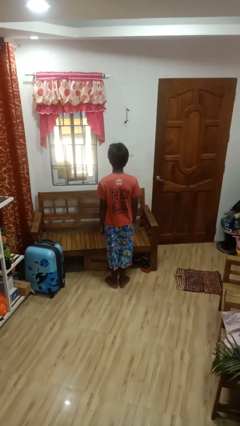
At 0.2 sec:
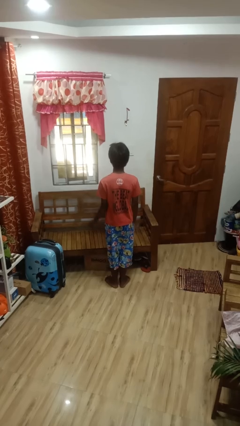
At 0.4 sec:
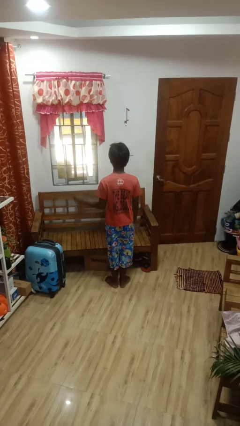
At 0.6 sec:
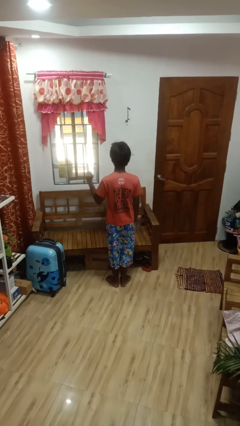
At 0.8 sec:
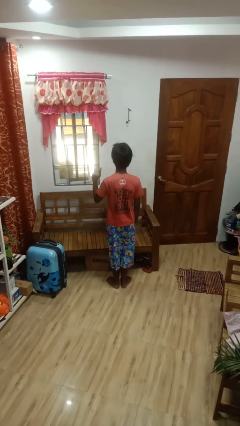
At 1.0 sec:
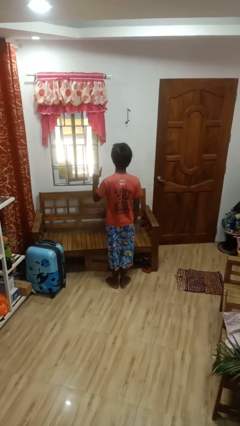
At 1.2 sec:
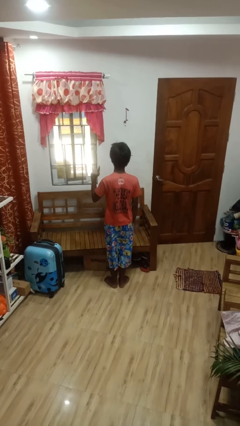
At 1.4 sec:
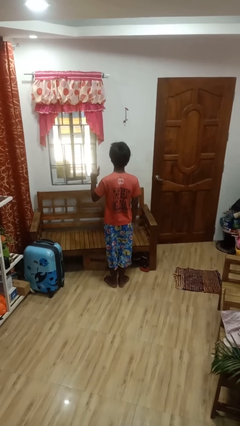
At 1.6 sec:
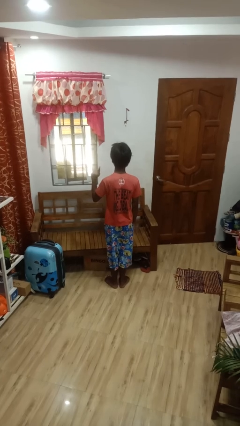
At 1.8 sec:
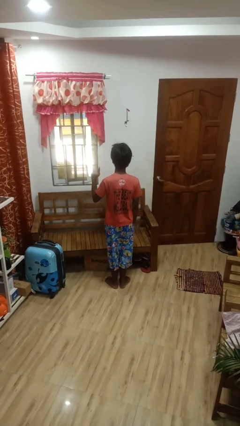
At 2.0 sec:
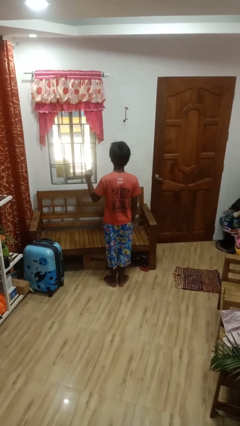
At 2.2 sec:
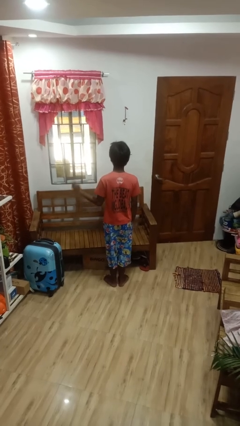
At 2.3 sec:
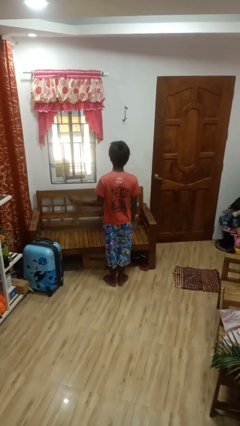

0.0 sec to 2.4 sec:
person gestures number one

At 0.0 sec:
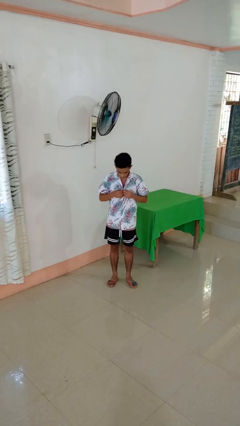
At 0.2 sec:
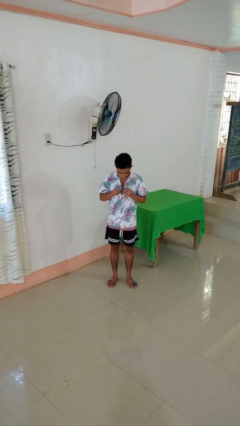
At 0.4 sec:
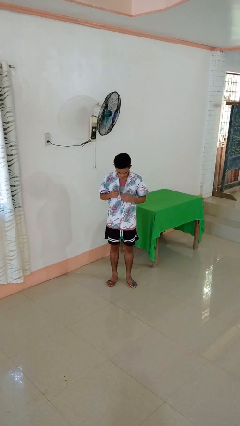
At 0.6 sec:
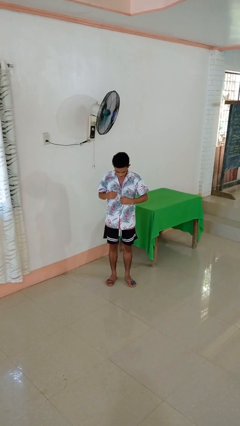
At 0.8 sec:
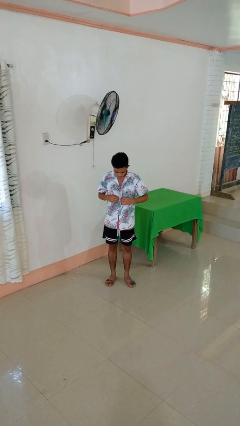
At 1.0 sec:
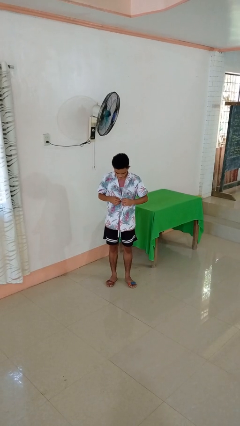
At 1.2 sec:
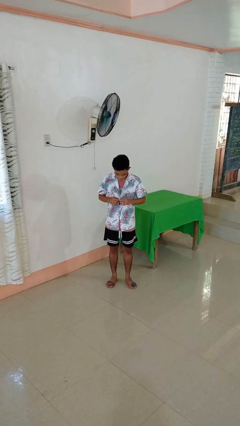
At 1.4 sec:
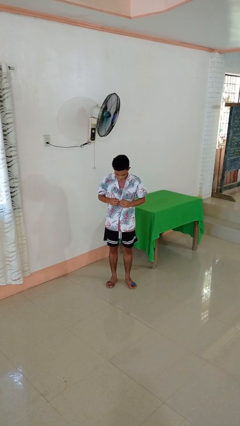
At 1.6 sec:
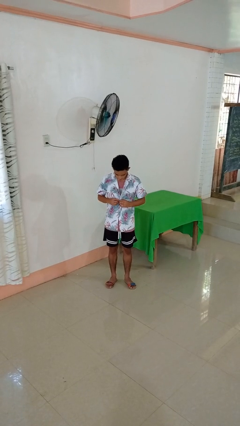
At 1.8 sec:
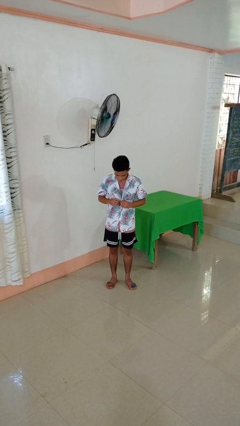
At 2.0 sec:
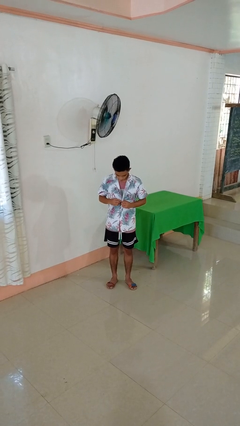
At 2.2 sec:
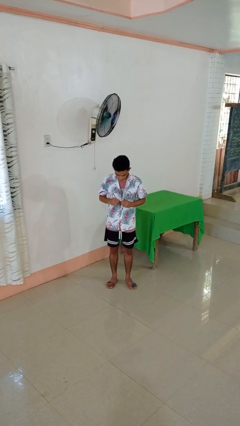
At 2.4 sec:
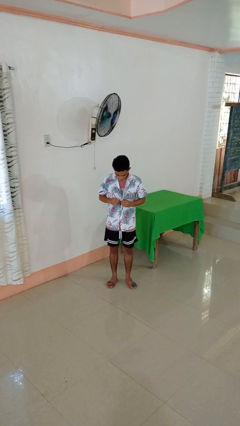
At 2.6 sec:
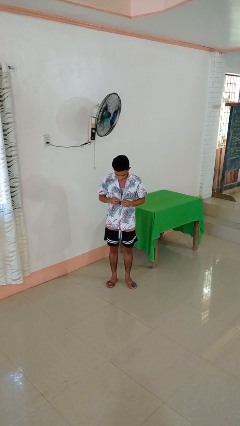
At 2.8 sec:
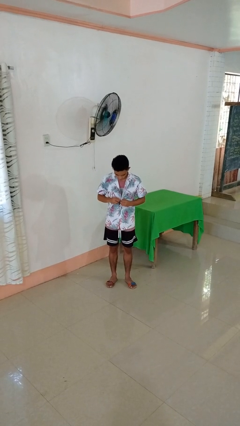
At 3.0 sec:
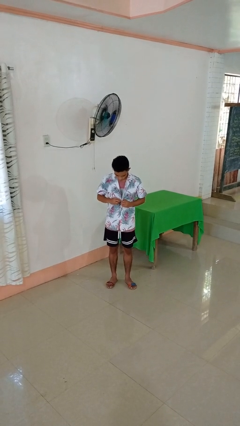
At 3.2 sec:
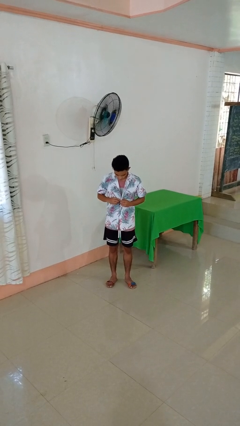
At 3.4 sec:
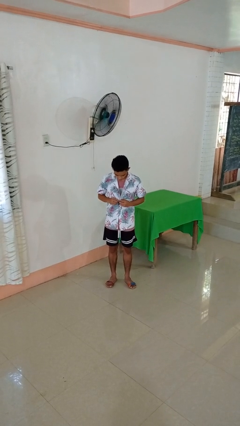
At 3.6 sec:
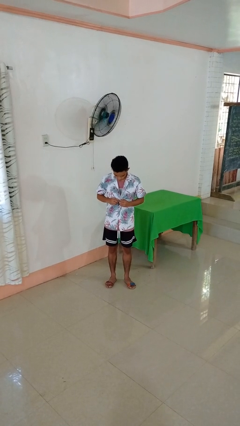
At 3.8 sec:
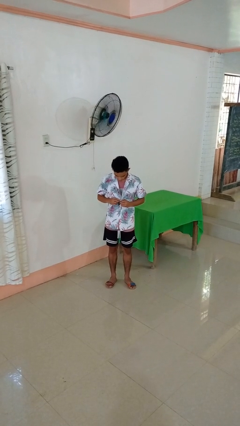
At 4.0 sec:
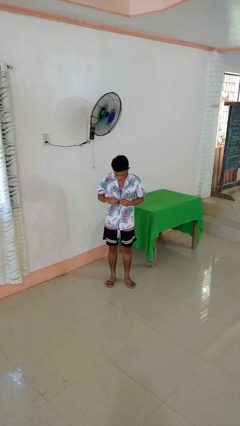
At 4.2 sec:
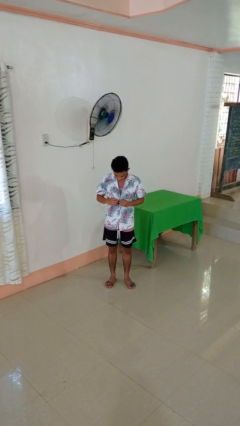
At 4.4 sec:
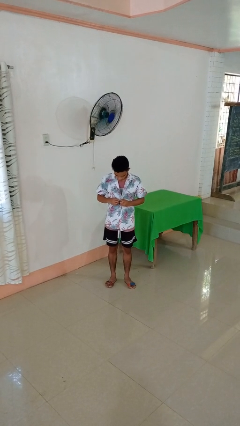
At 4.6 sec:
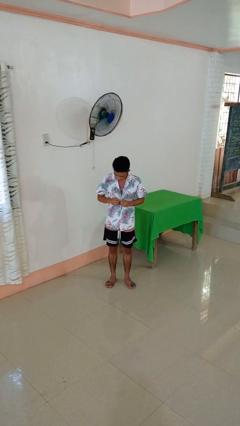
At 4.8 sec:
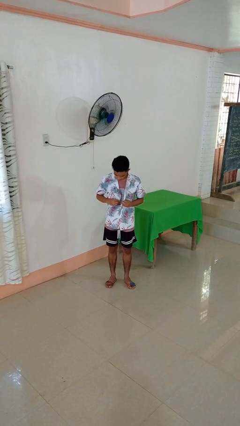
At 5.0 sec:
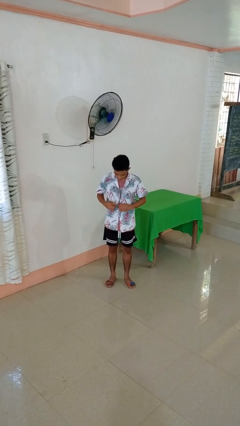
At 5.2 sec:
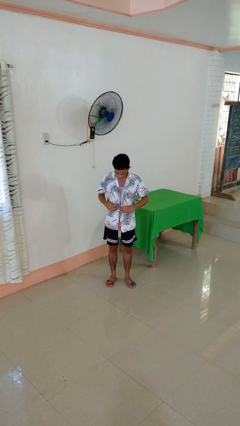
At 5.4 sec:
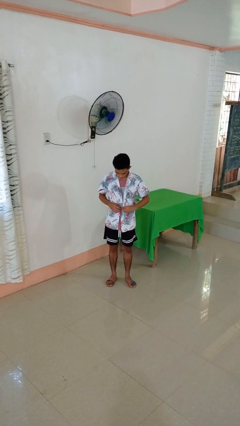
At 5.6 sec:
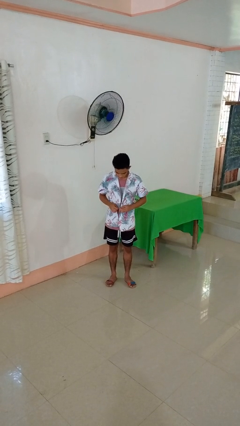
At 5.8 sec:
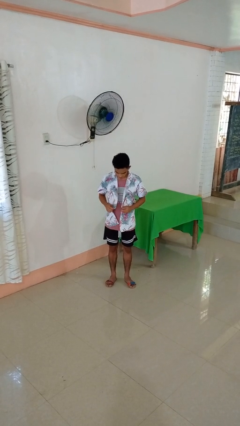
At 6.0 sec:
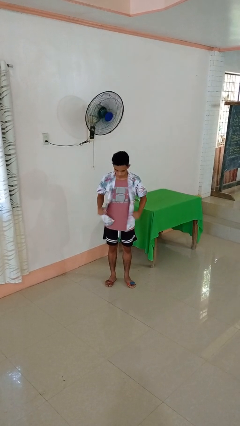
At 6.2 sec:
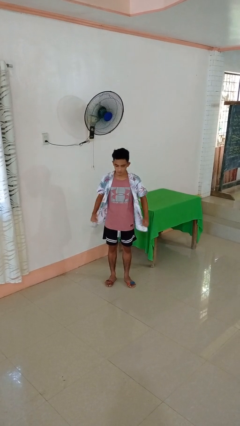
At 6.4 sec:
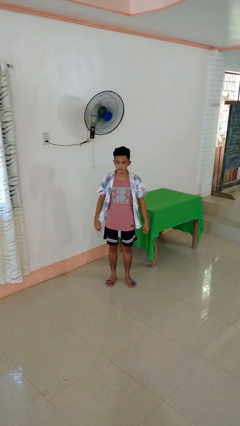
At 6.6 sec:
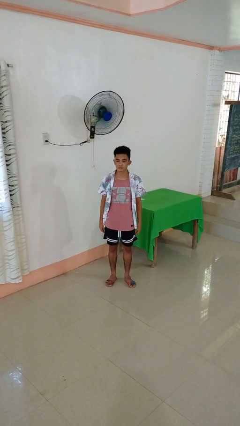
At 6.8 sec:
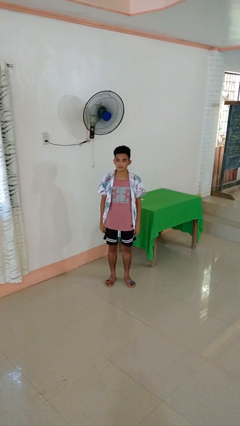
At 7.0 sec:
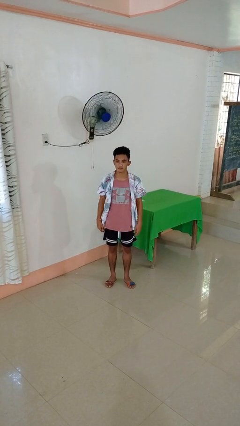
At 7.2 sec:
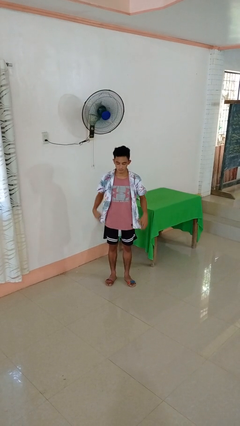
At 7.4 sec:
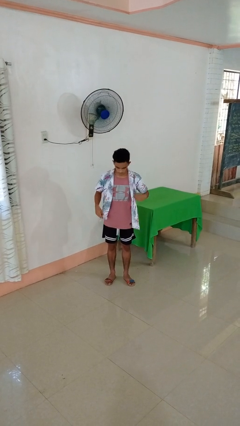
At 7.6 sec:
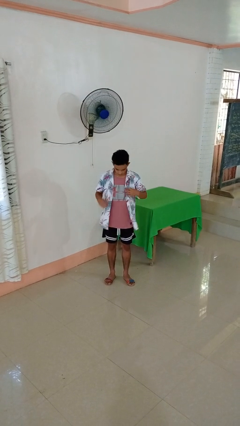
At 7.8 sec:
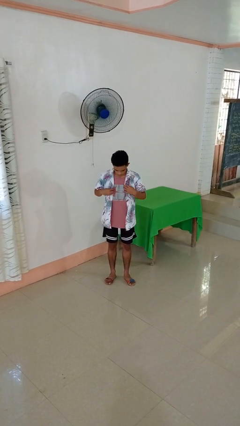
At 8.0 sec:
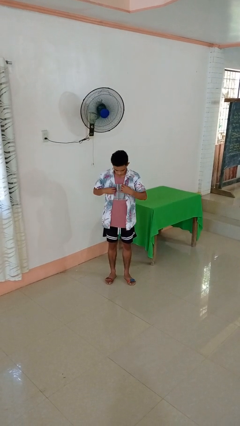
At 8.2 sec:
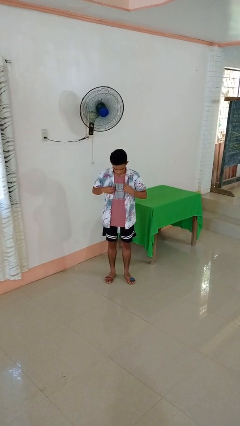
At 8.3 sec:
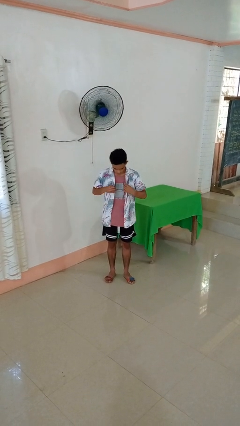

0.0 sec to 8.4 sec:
person unbuttons shirt

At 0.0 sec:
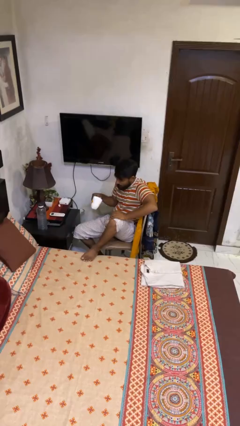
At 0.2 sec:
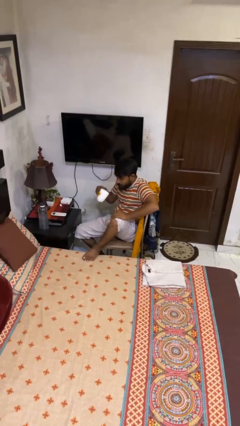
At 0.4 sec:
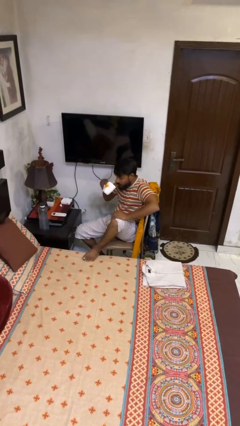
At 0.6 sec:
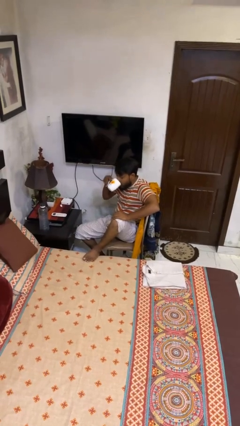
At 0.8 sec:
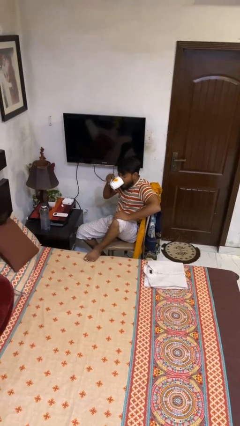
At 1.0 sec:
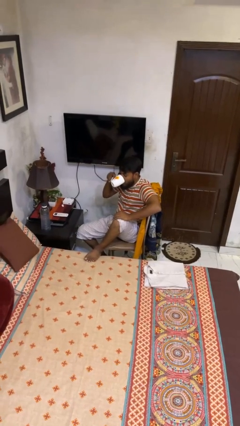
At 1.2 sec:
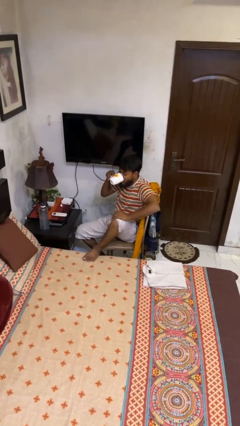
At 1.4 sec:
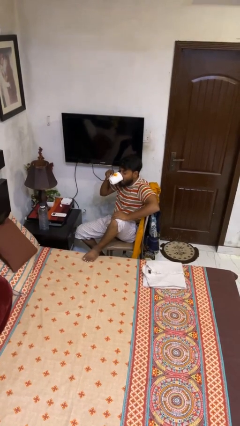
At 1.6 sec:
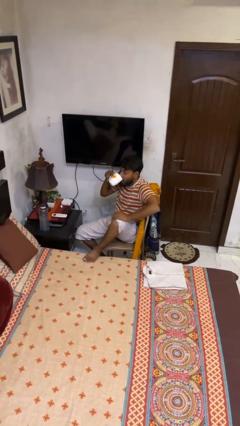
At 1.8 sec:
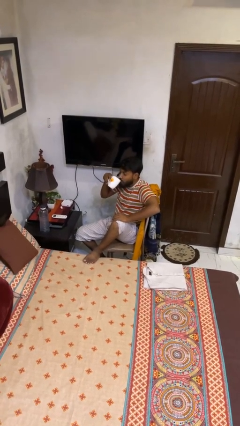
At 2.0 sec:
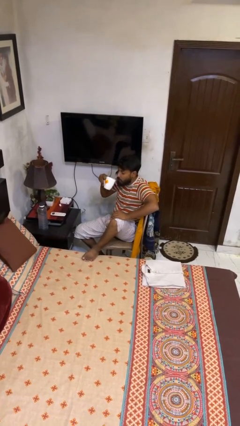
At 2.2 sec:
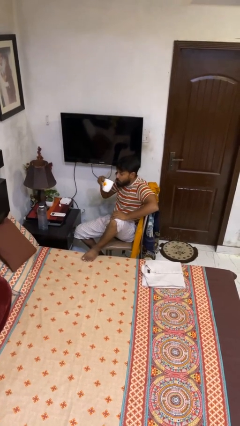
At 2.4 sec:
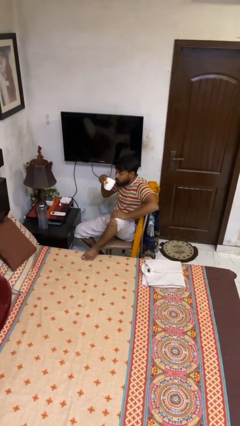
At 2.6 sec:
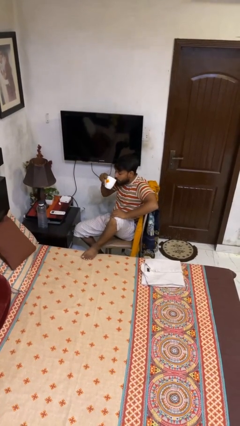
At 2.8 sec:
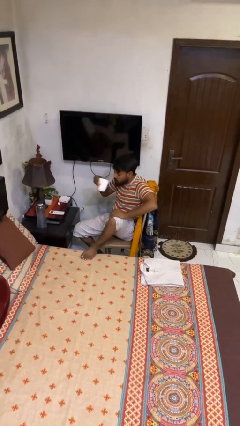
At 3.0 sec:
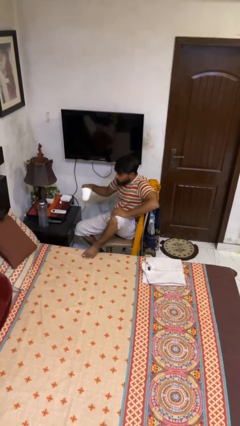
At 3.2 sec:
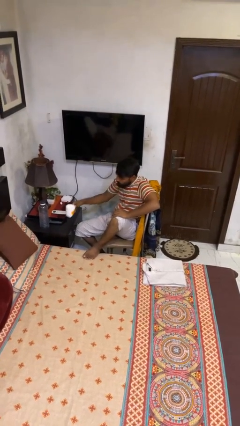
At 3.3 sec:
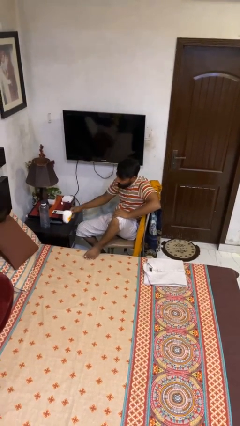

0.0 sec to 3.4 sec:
person drinks from mug

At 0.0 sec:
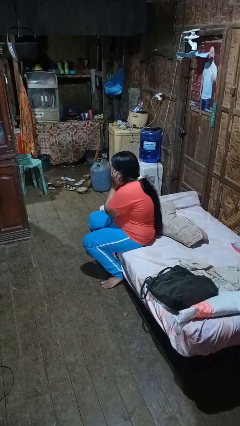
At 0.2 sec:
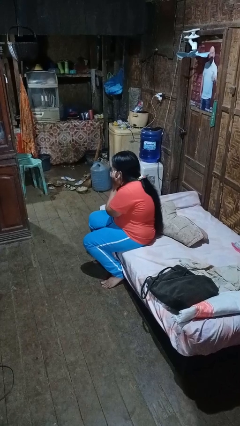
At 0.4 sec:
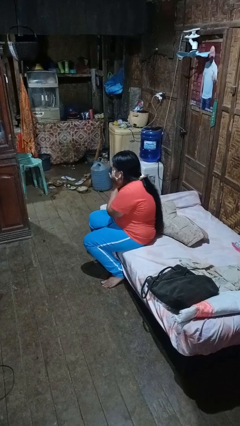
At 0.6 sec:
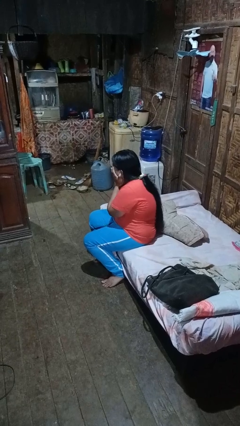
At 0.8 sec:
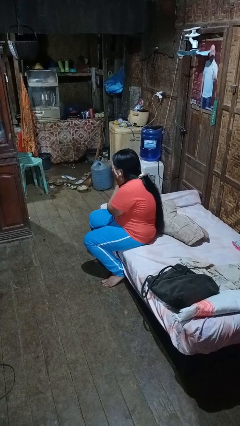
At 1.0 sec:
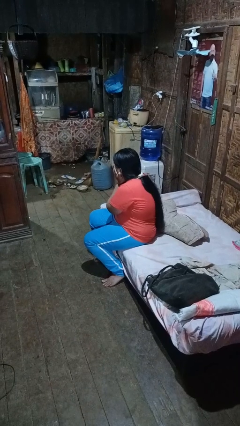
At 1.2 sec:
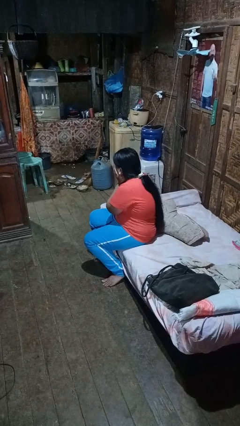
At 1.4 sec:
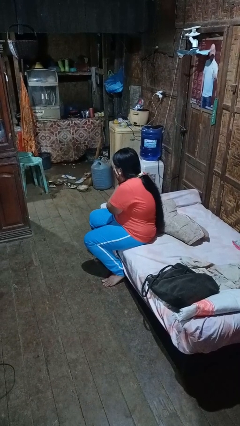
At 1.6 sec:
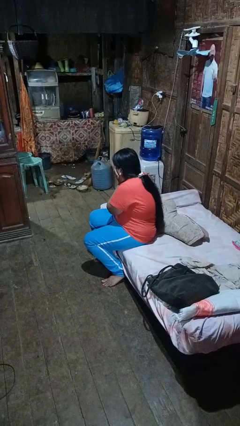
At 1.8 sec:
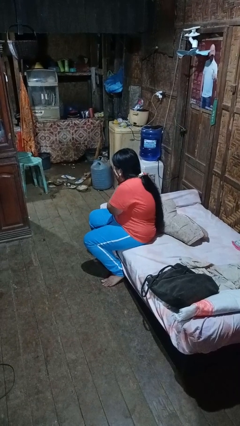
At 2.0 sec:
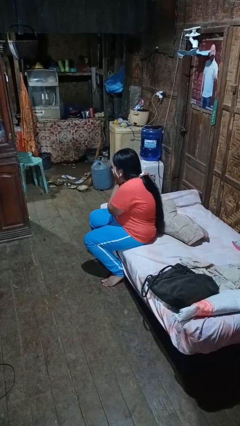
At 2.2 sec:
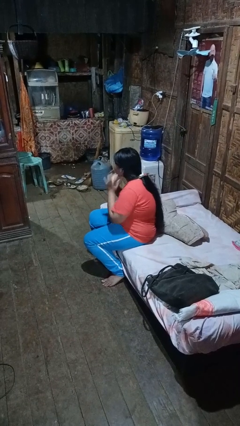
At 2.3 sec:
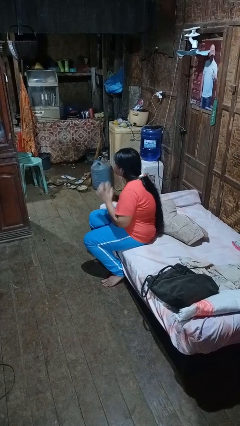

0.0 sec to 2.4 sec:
person puts fingers in ear

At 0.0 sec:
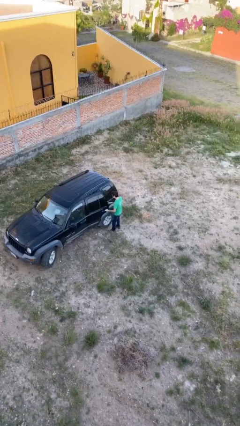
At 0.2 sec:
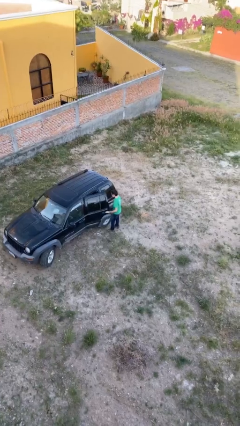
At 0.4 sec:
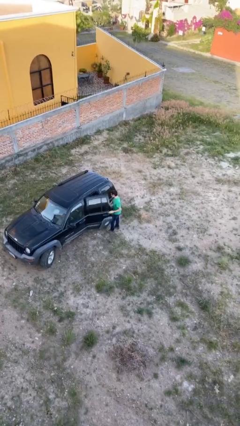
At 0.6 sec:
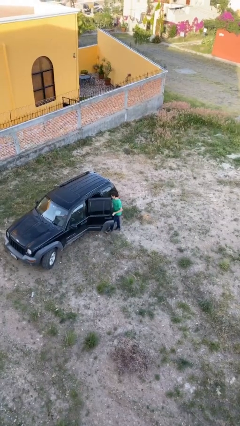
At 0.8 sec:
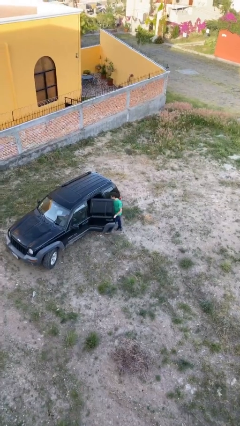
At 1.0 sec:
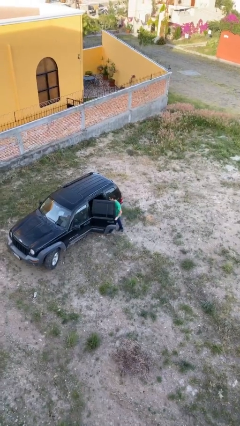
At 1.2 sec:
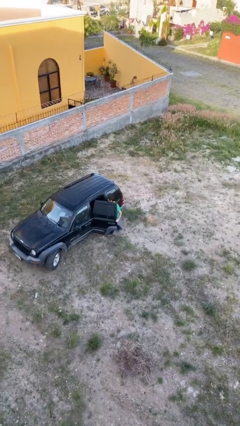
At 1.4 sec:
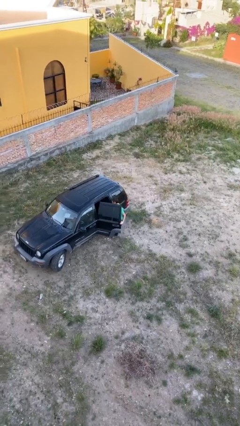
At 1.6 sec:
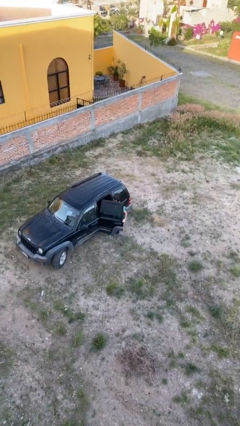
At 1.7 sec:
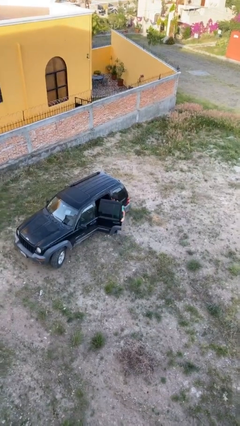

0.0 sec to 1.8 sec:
person opens car door
